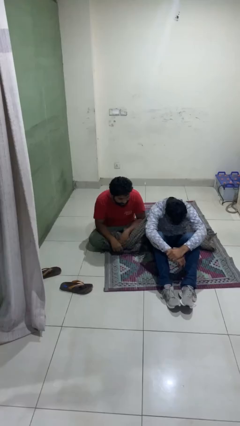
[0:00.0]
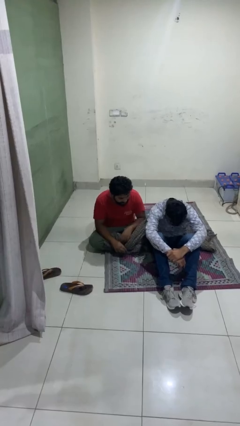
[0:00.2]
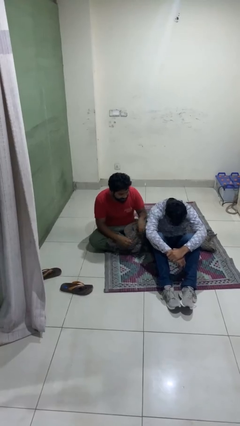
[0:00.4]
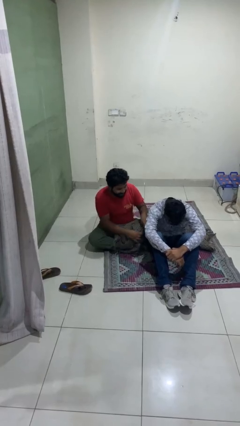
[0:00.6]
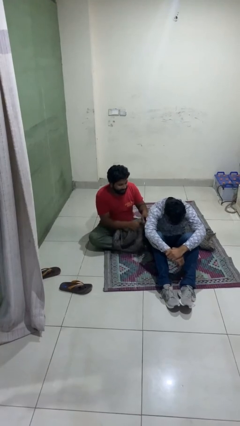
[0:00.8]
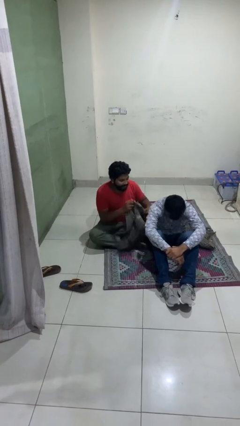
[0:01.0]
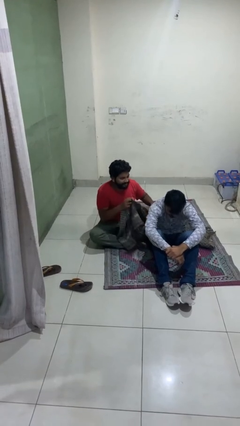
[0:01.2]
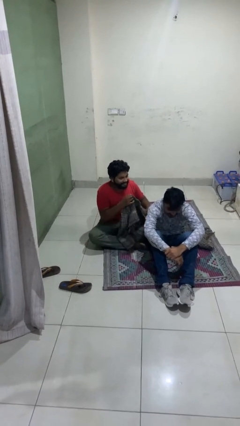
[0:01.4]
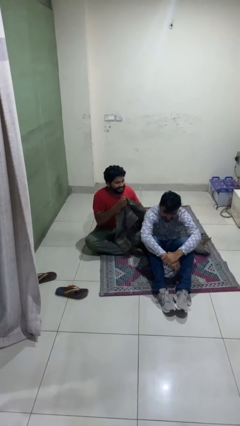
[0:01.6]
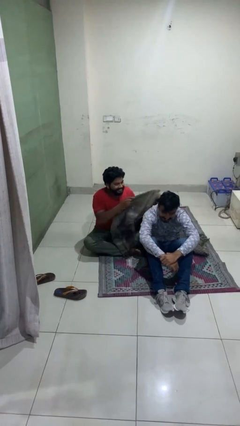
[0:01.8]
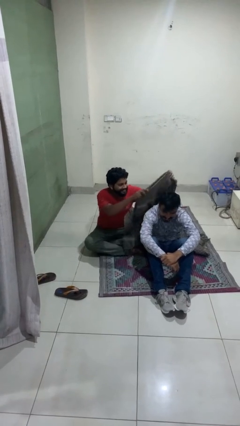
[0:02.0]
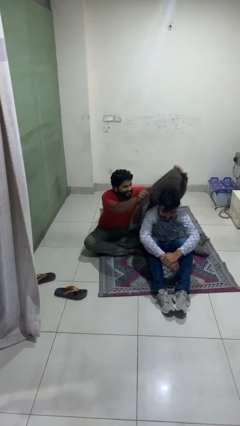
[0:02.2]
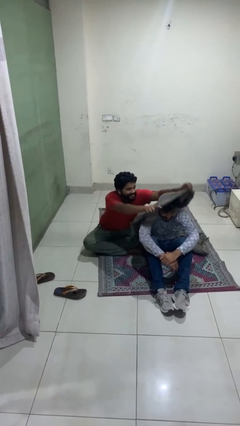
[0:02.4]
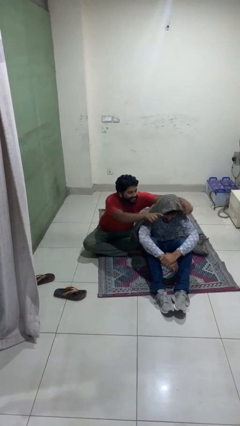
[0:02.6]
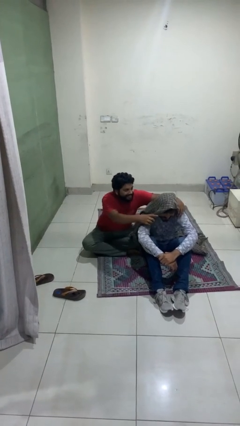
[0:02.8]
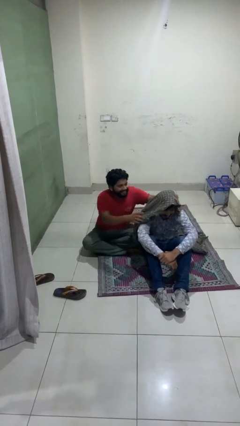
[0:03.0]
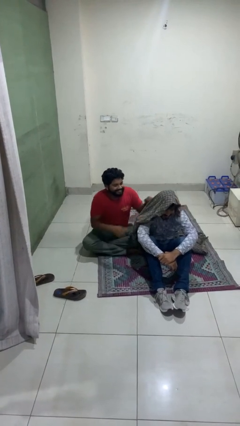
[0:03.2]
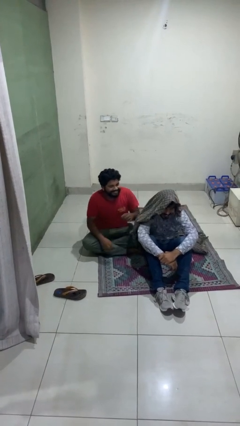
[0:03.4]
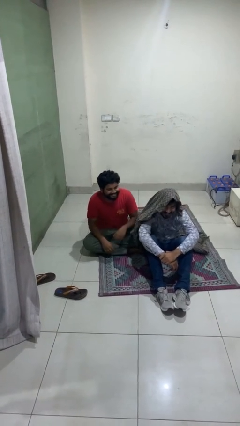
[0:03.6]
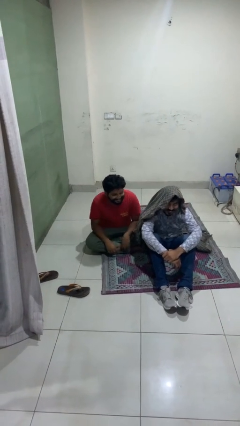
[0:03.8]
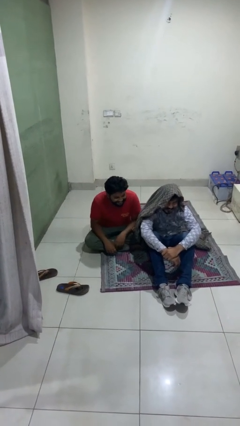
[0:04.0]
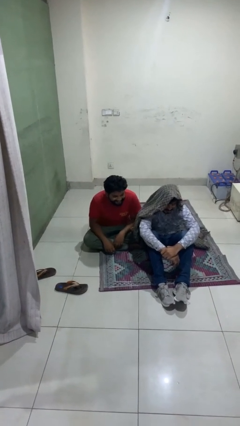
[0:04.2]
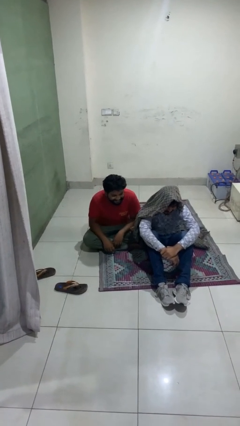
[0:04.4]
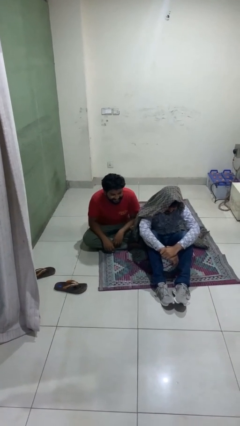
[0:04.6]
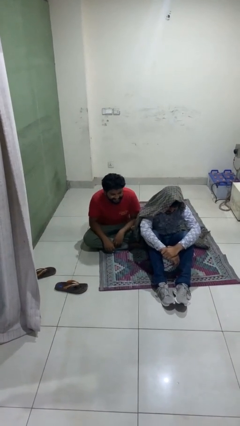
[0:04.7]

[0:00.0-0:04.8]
person covers friend with blanket

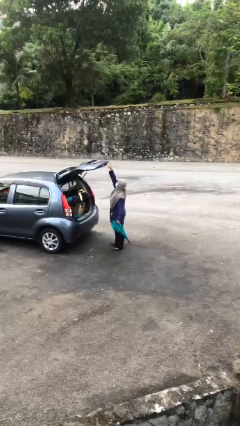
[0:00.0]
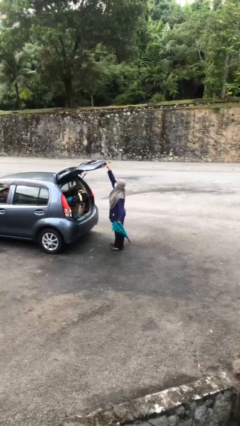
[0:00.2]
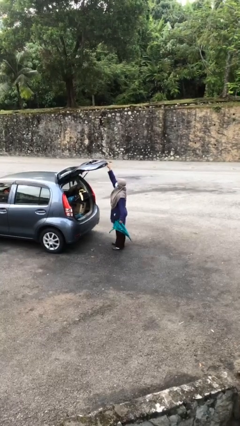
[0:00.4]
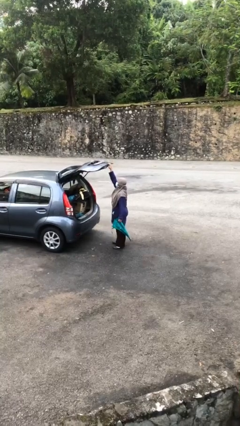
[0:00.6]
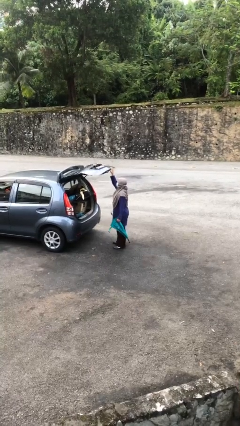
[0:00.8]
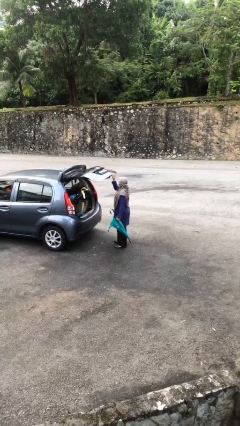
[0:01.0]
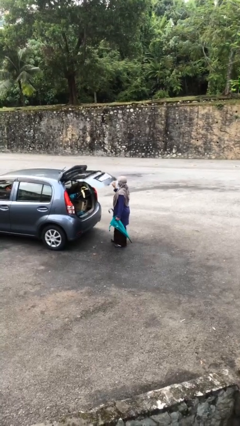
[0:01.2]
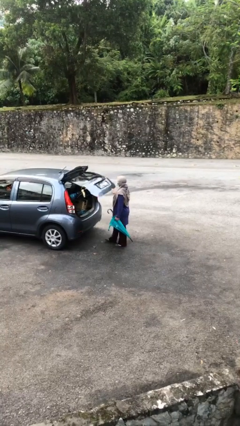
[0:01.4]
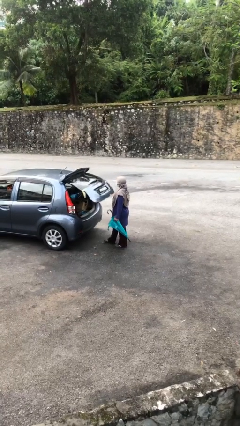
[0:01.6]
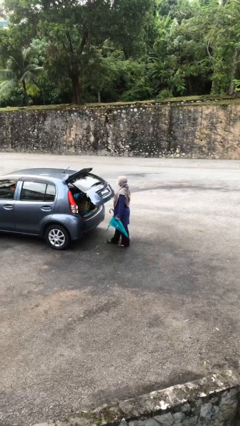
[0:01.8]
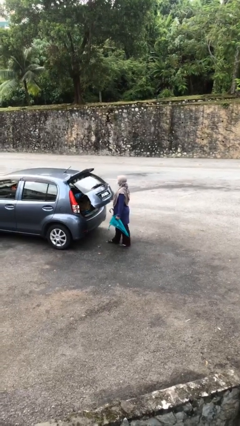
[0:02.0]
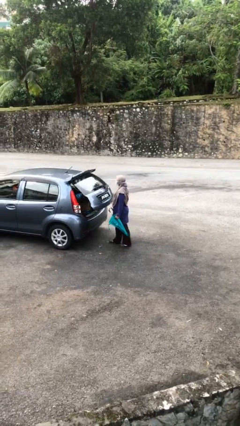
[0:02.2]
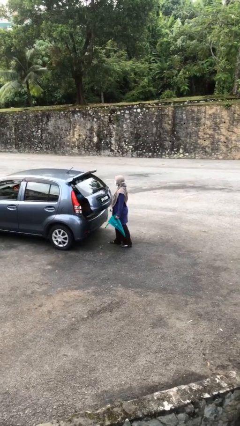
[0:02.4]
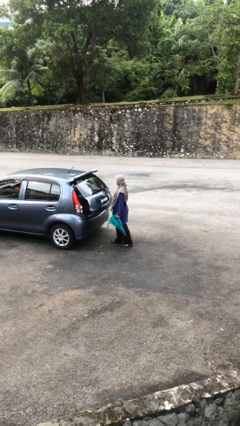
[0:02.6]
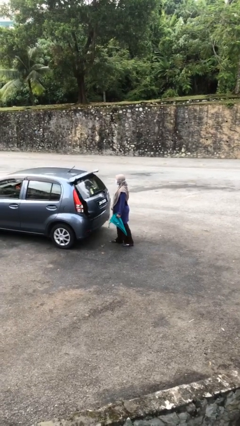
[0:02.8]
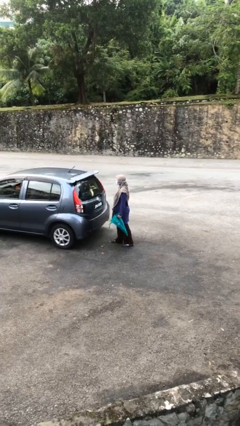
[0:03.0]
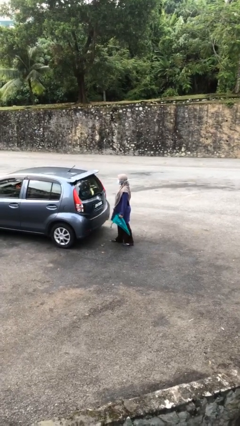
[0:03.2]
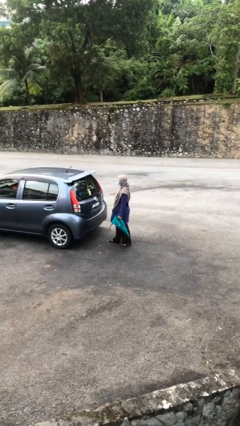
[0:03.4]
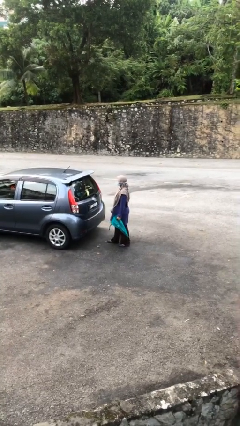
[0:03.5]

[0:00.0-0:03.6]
person closes car trunk

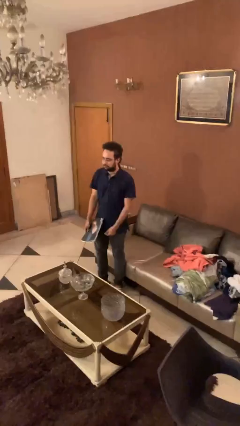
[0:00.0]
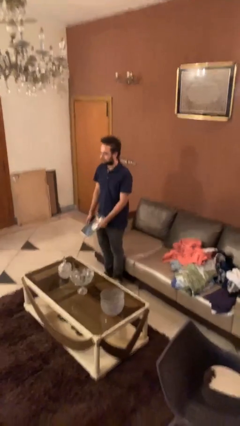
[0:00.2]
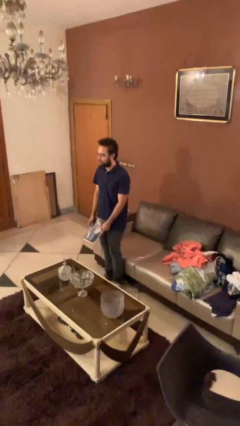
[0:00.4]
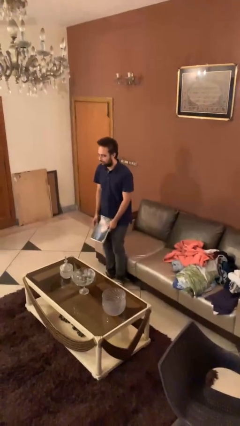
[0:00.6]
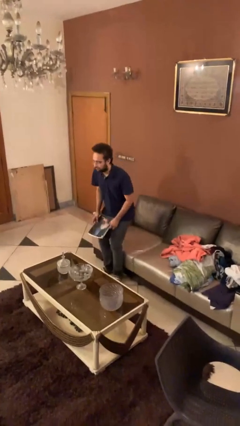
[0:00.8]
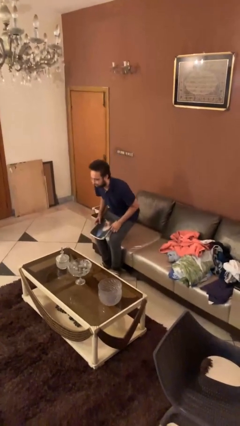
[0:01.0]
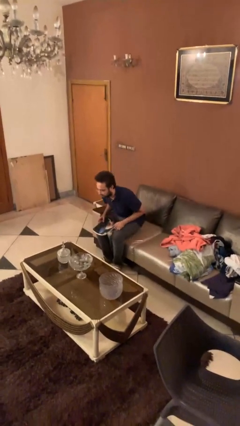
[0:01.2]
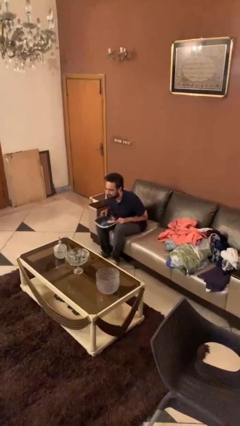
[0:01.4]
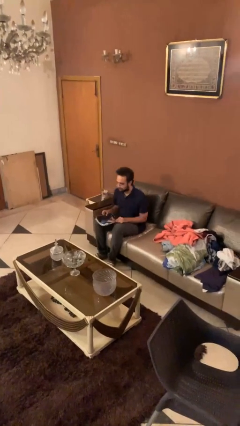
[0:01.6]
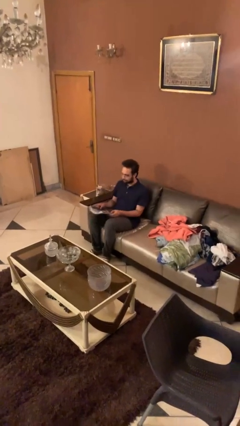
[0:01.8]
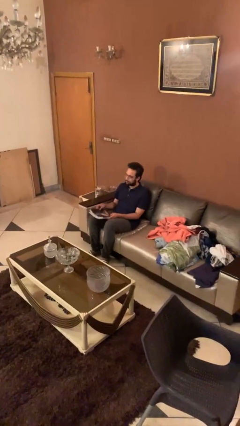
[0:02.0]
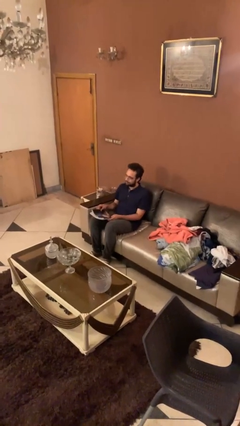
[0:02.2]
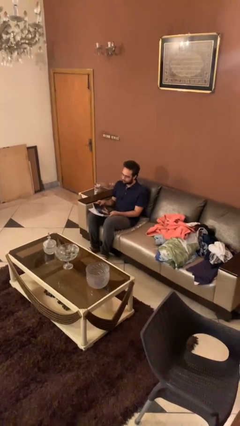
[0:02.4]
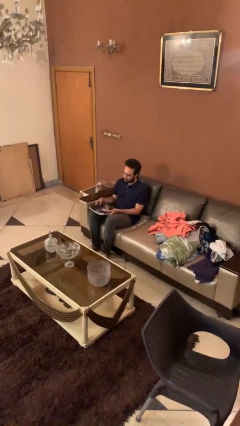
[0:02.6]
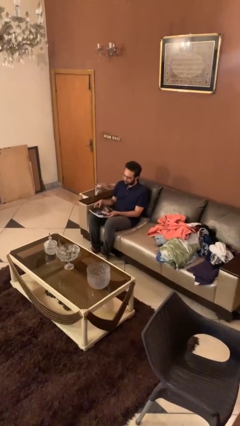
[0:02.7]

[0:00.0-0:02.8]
person sits down

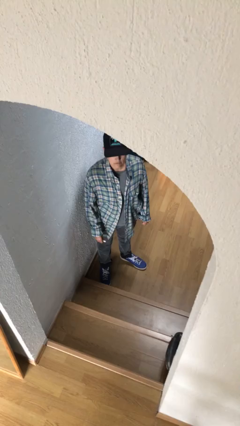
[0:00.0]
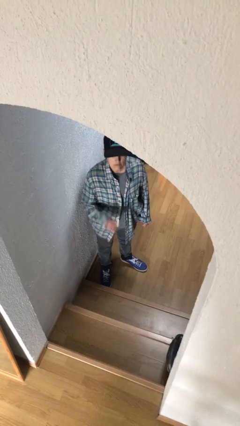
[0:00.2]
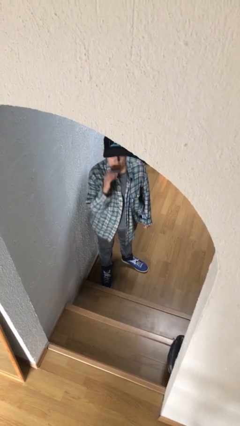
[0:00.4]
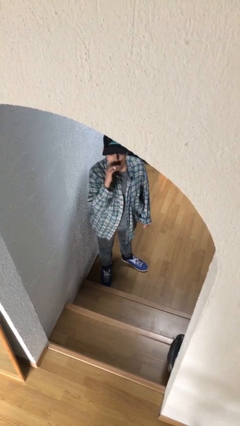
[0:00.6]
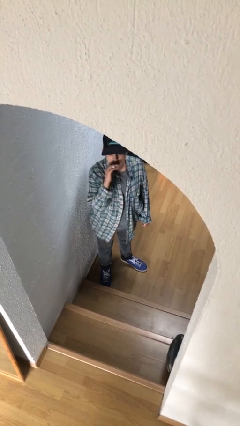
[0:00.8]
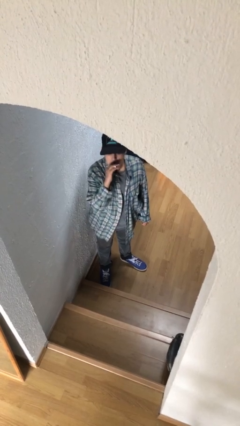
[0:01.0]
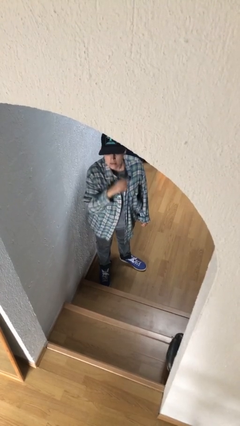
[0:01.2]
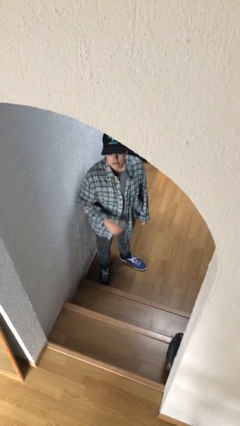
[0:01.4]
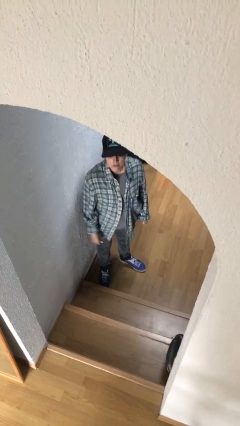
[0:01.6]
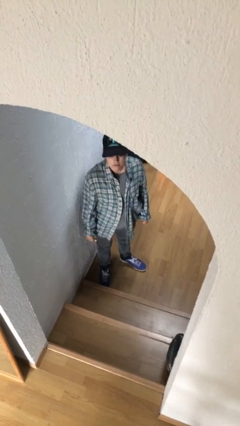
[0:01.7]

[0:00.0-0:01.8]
person applies lip makeup

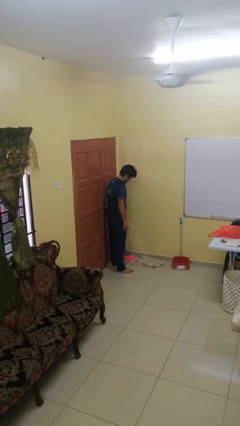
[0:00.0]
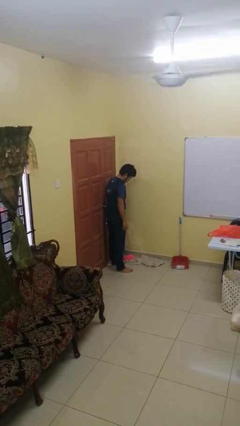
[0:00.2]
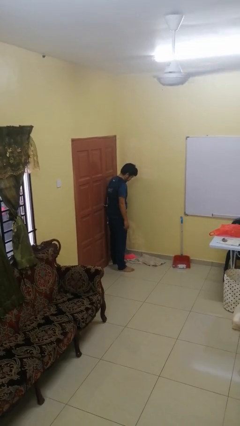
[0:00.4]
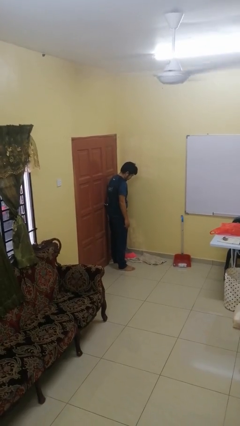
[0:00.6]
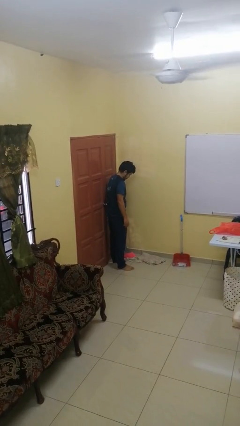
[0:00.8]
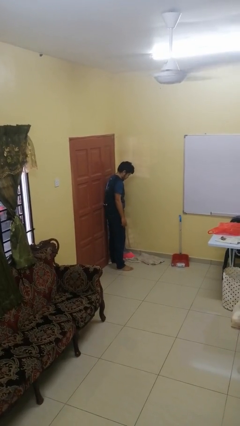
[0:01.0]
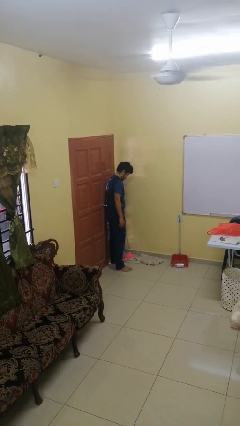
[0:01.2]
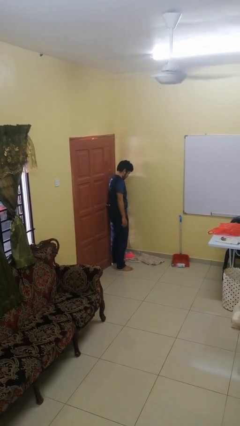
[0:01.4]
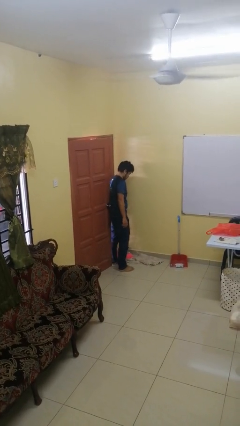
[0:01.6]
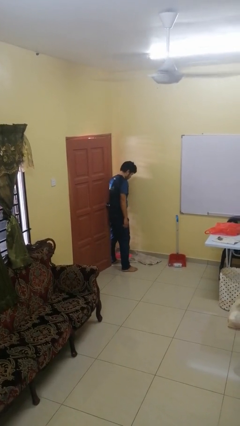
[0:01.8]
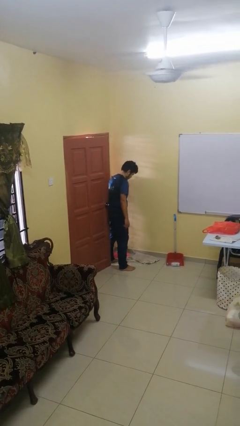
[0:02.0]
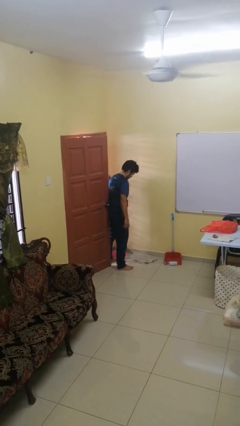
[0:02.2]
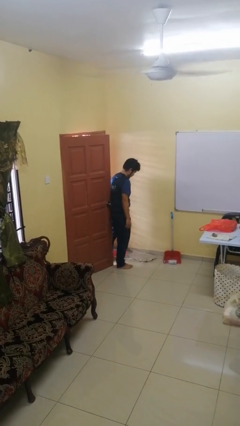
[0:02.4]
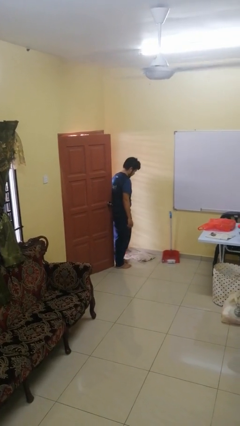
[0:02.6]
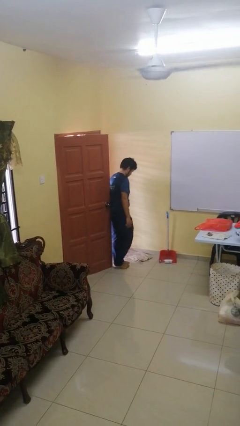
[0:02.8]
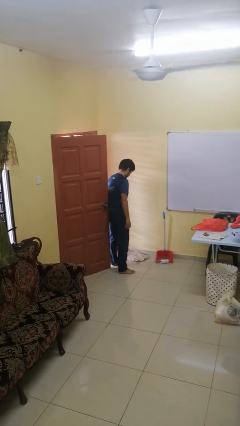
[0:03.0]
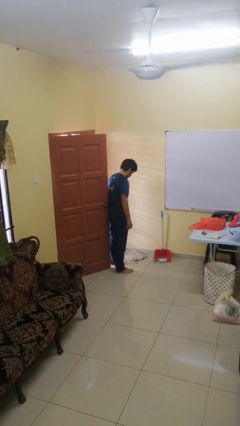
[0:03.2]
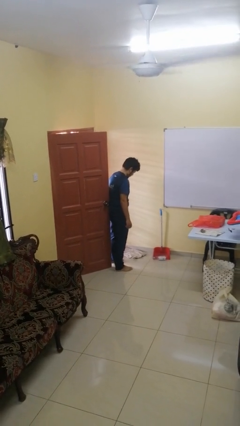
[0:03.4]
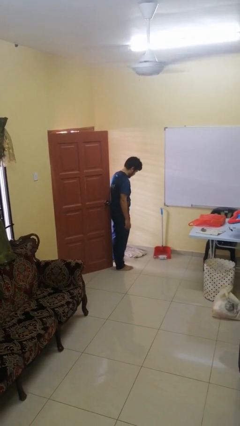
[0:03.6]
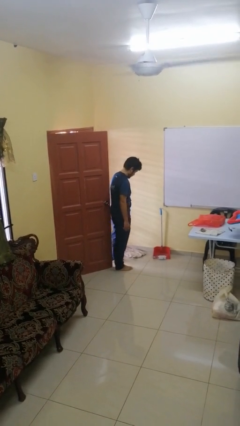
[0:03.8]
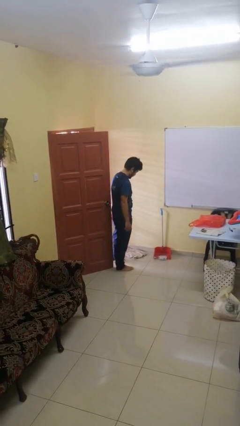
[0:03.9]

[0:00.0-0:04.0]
person opens facility door

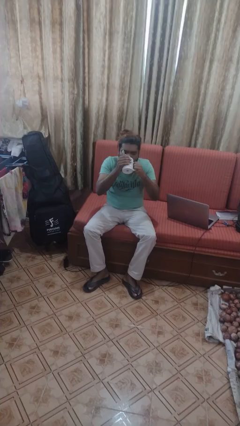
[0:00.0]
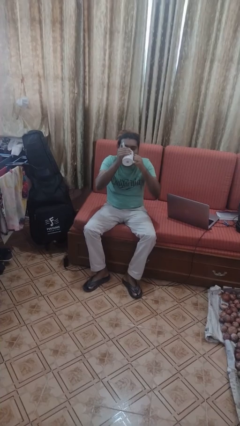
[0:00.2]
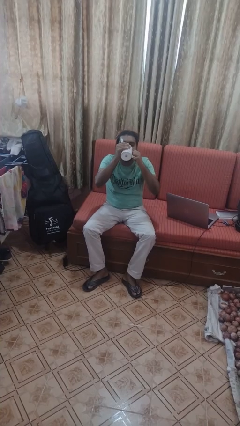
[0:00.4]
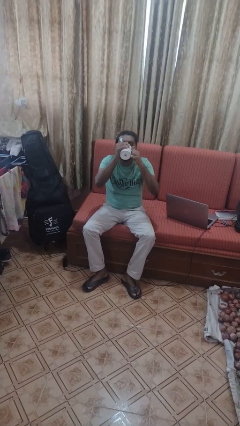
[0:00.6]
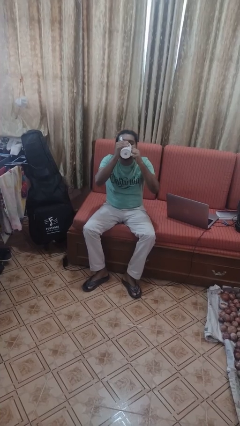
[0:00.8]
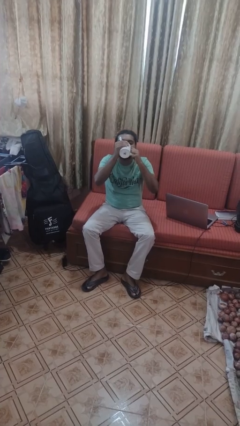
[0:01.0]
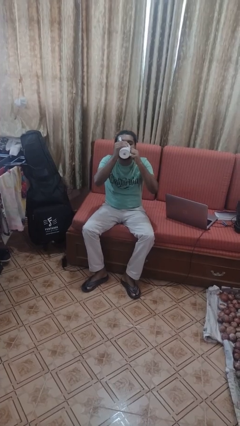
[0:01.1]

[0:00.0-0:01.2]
person drinks from mug
